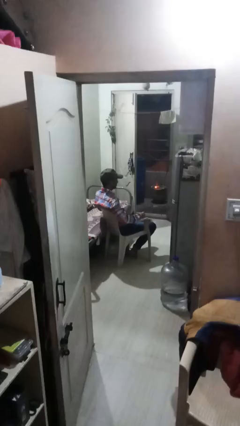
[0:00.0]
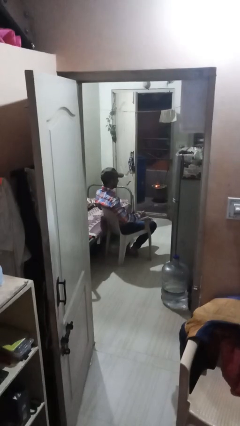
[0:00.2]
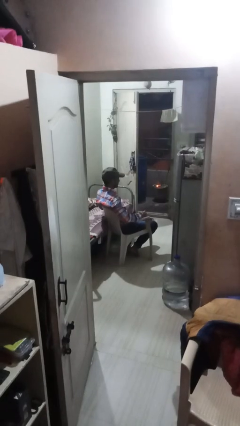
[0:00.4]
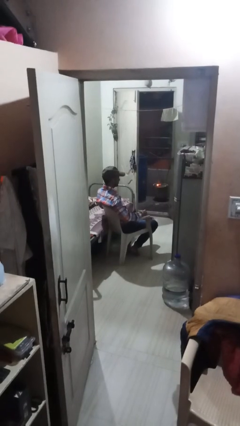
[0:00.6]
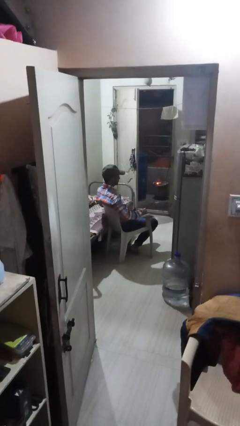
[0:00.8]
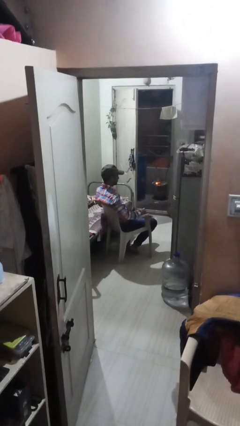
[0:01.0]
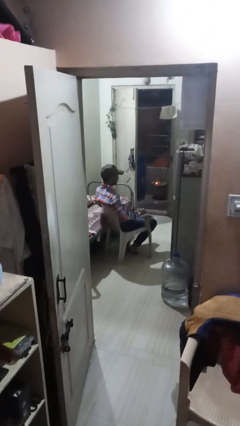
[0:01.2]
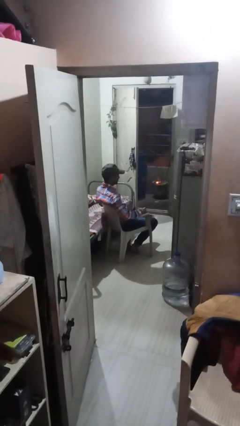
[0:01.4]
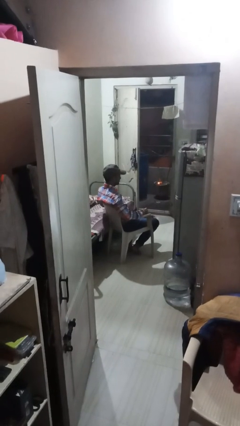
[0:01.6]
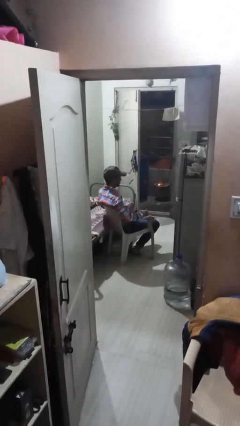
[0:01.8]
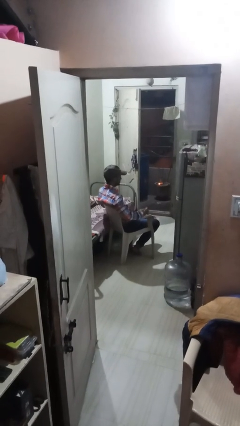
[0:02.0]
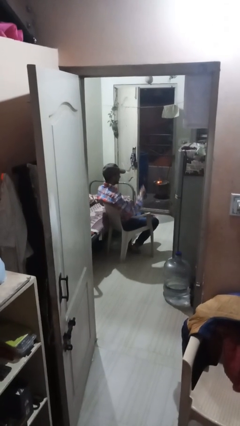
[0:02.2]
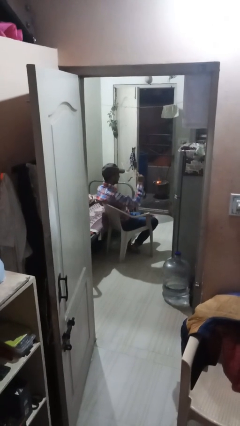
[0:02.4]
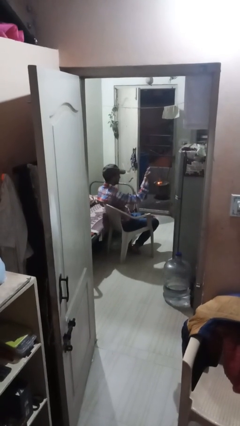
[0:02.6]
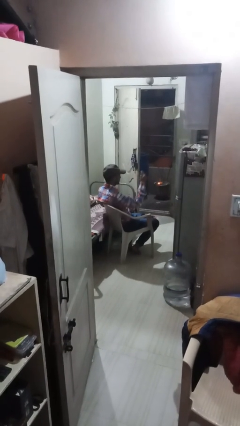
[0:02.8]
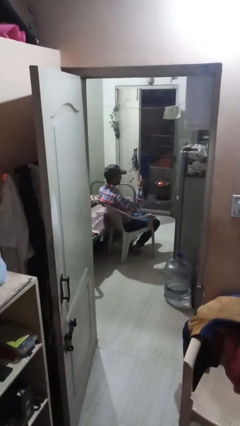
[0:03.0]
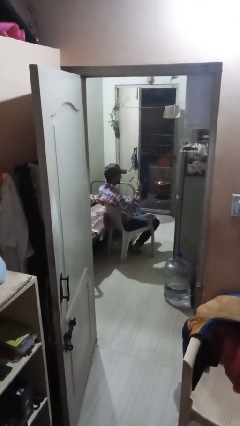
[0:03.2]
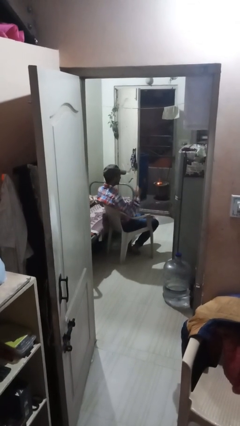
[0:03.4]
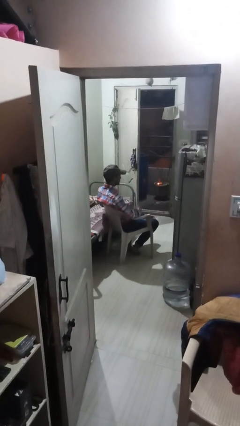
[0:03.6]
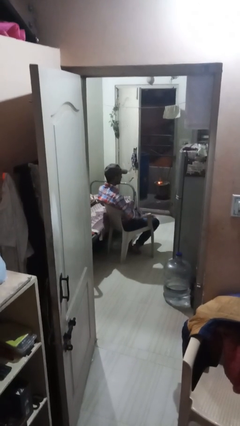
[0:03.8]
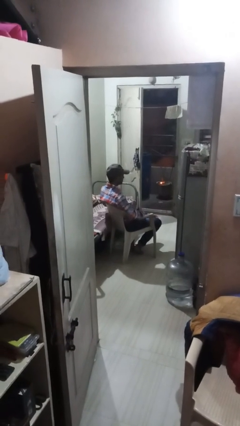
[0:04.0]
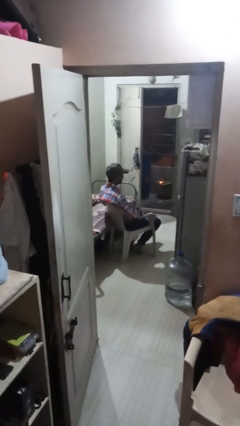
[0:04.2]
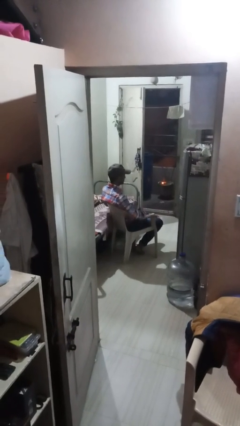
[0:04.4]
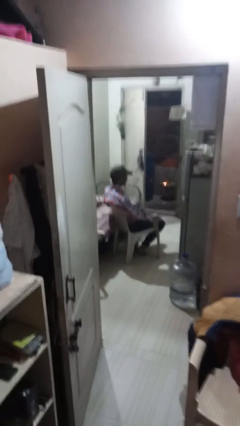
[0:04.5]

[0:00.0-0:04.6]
person snaps fingers

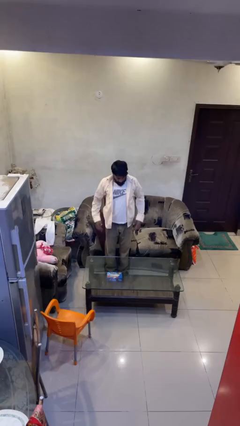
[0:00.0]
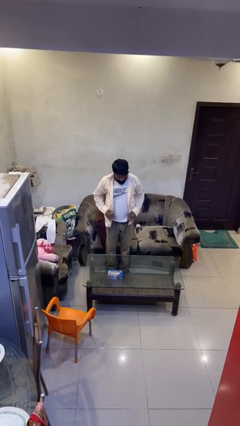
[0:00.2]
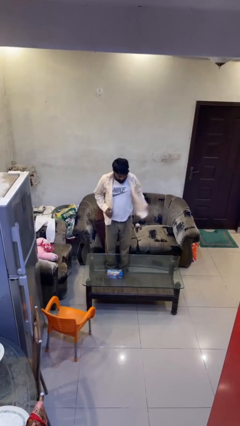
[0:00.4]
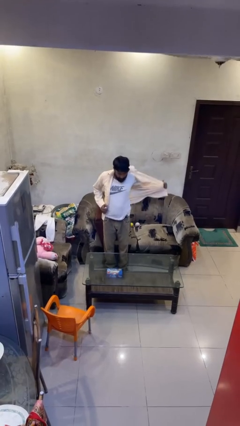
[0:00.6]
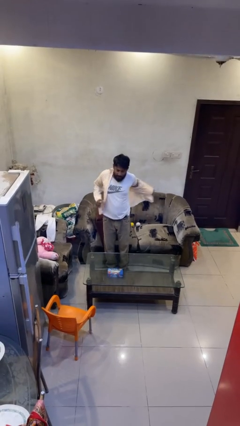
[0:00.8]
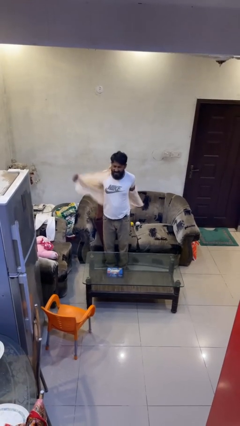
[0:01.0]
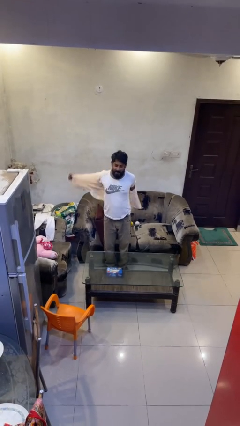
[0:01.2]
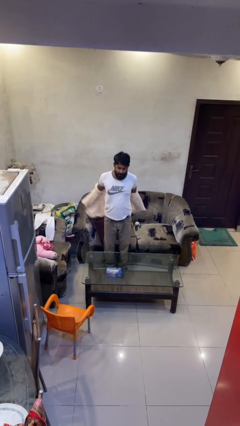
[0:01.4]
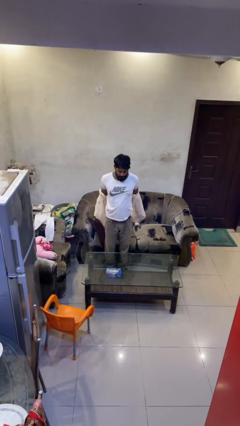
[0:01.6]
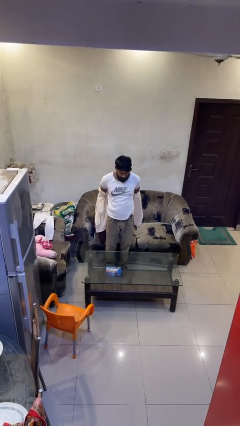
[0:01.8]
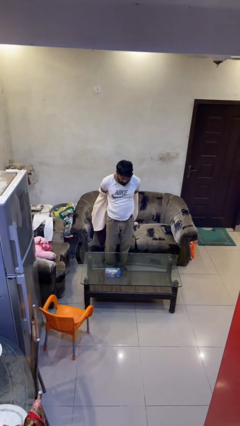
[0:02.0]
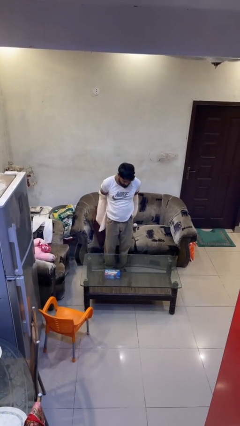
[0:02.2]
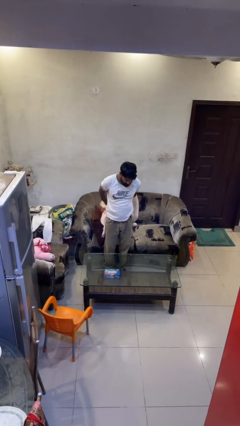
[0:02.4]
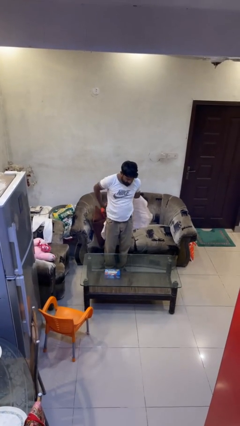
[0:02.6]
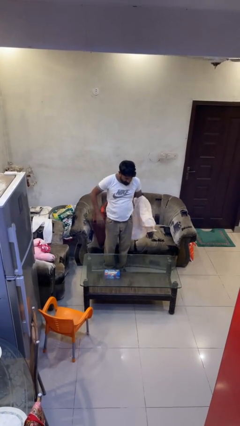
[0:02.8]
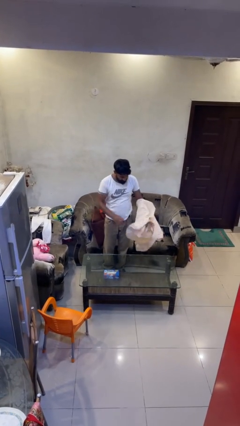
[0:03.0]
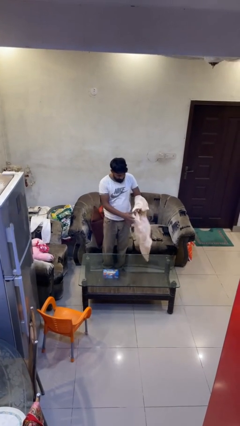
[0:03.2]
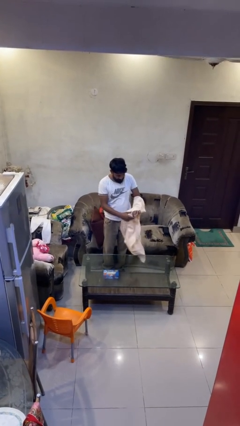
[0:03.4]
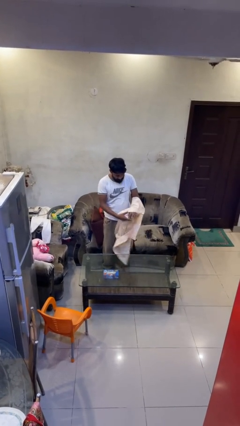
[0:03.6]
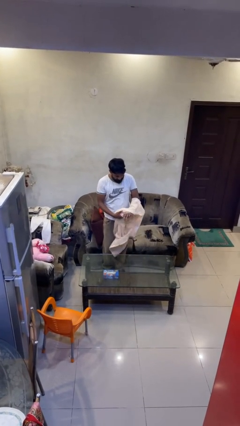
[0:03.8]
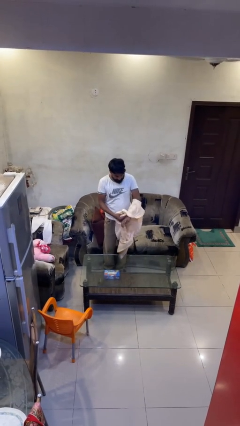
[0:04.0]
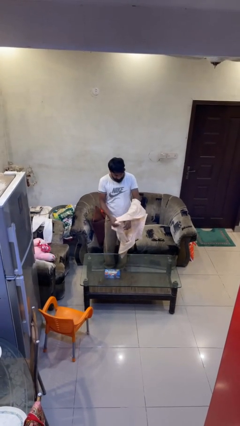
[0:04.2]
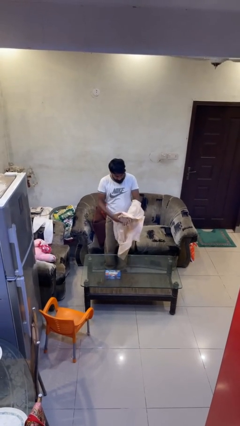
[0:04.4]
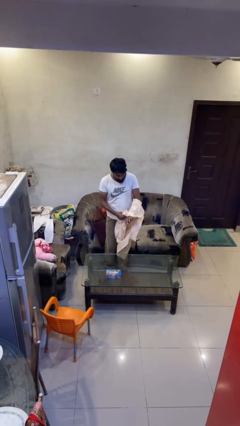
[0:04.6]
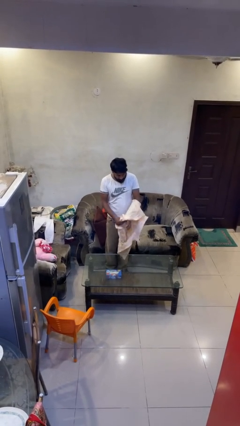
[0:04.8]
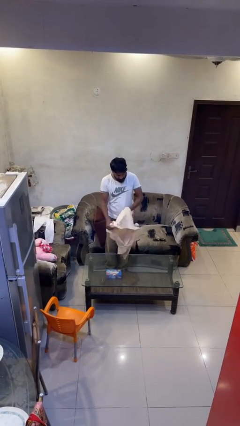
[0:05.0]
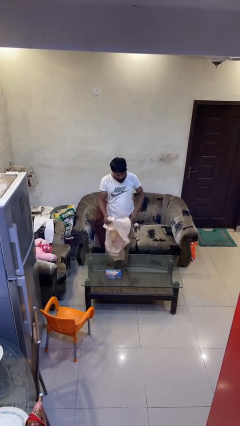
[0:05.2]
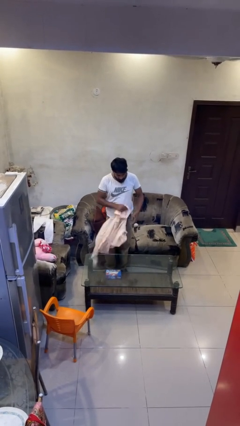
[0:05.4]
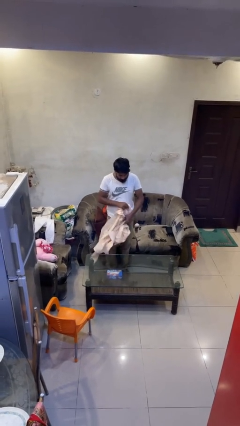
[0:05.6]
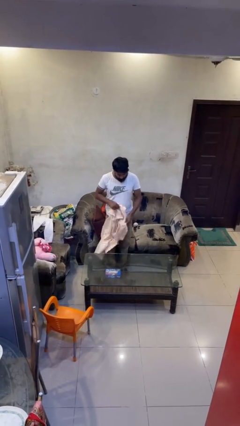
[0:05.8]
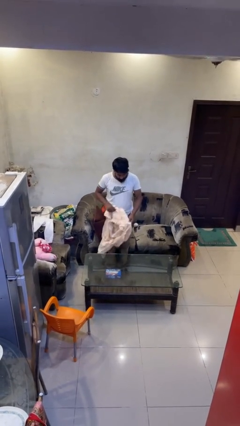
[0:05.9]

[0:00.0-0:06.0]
person takes off shirt

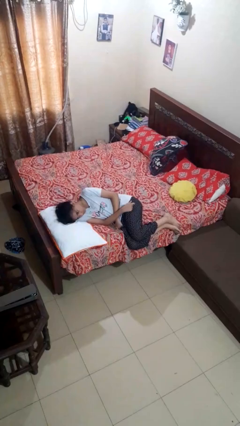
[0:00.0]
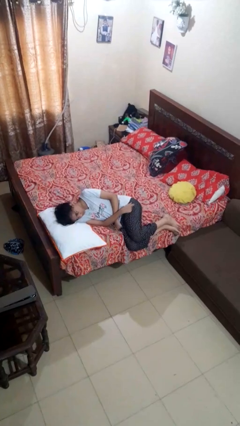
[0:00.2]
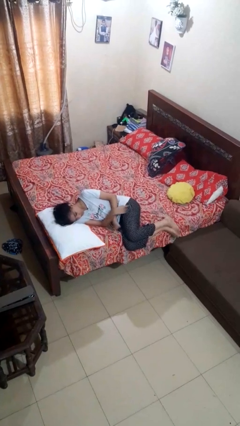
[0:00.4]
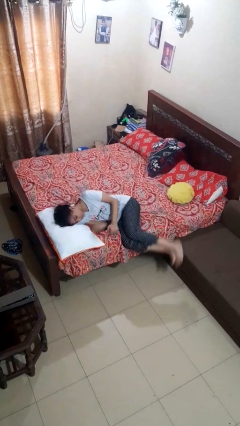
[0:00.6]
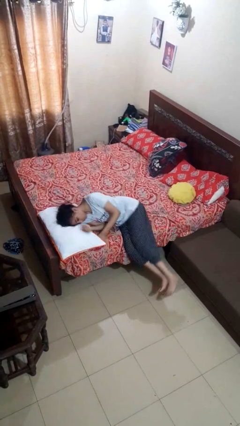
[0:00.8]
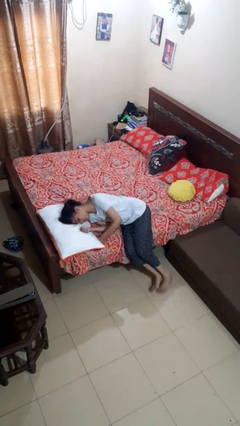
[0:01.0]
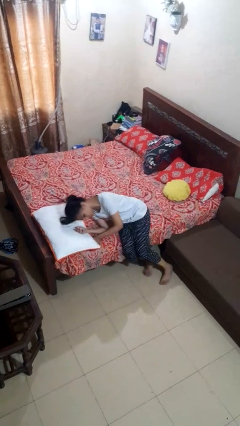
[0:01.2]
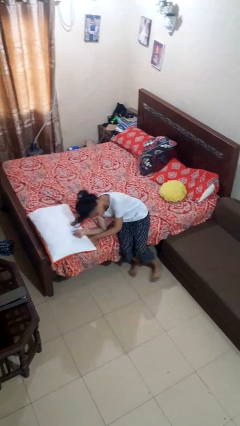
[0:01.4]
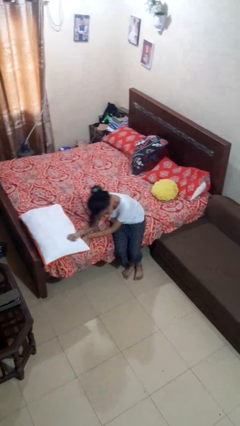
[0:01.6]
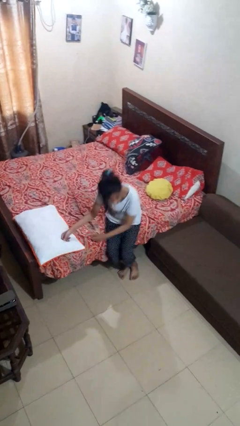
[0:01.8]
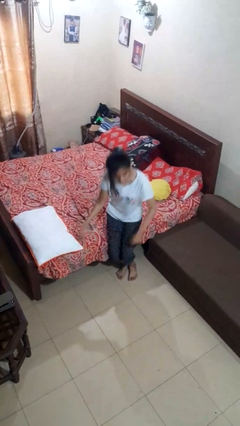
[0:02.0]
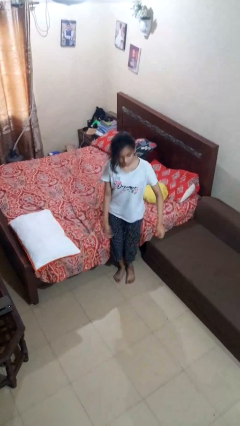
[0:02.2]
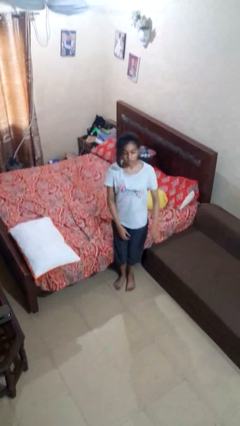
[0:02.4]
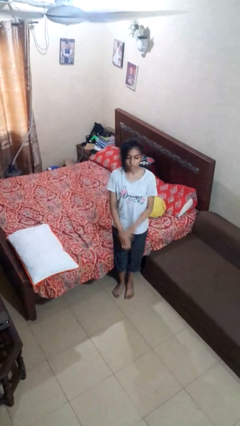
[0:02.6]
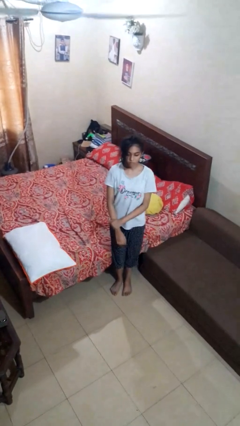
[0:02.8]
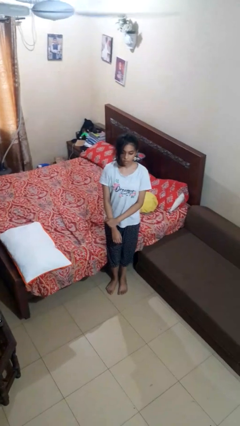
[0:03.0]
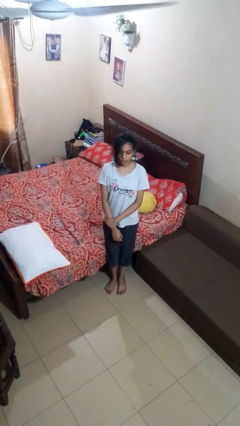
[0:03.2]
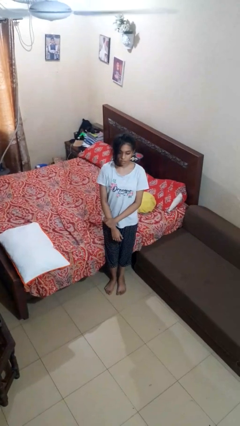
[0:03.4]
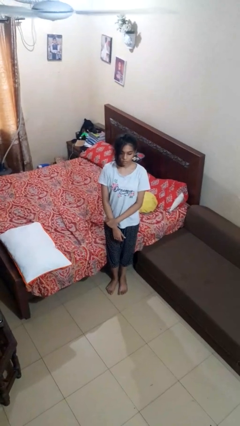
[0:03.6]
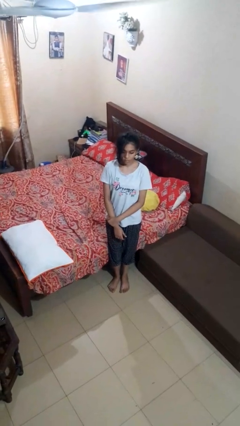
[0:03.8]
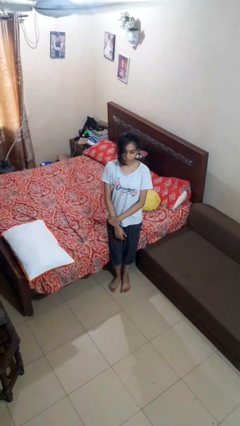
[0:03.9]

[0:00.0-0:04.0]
person stands up

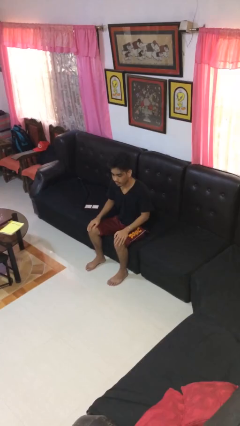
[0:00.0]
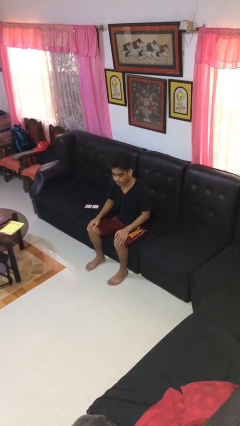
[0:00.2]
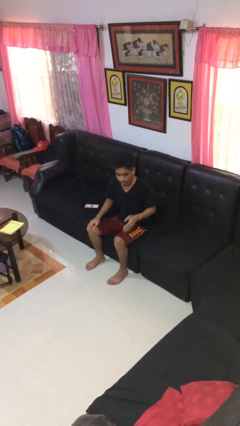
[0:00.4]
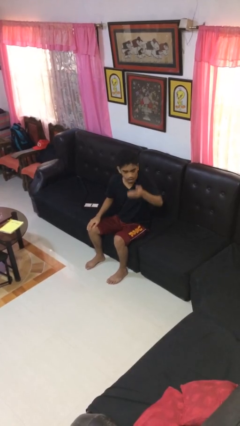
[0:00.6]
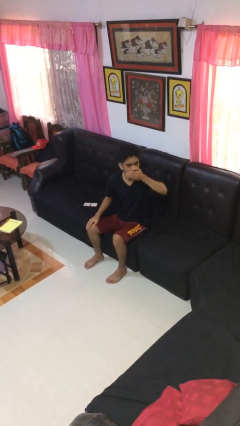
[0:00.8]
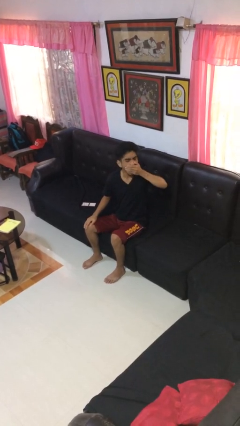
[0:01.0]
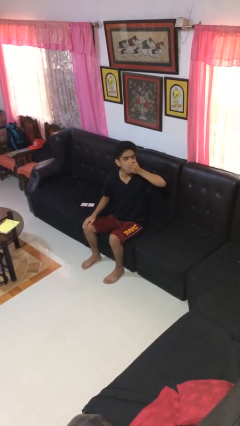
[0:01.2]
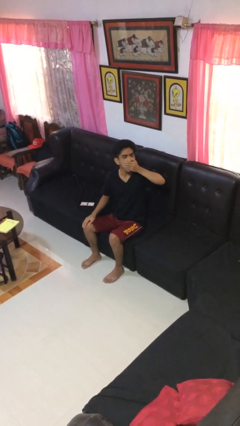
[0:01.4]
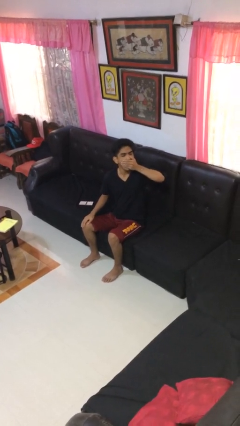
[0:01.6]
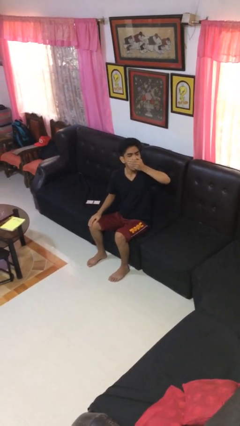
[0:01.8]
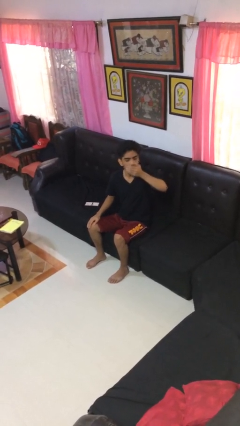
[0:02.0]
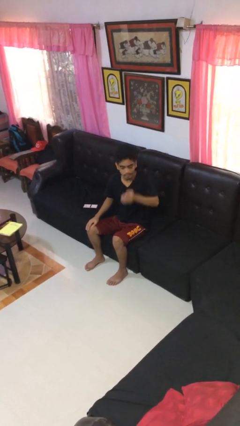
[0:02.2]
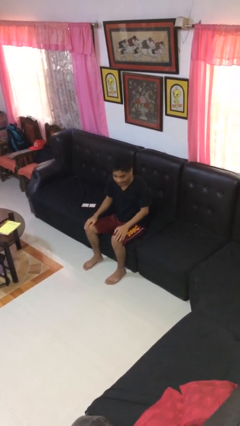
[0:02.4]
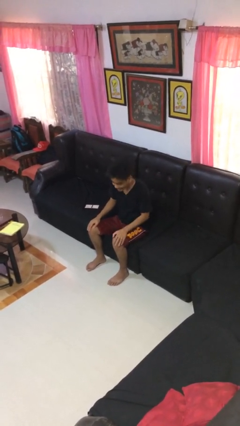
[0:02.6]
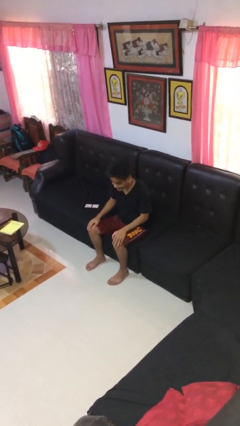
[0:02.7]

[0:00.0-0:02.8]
person yawns

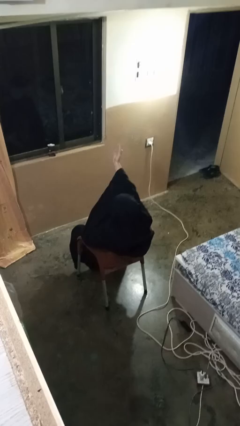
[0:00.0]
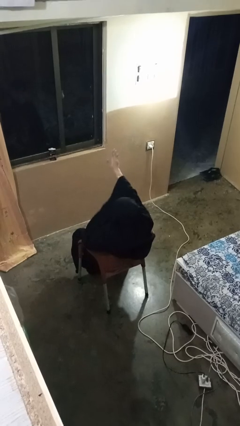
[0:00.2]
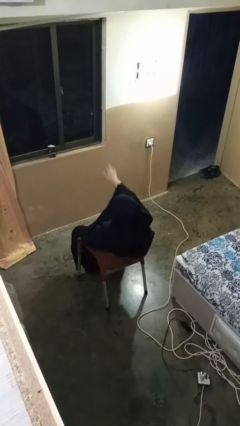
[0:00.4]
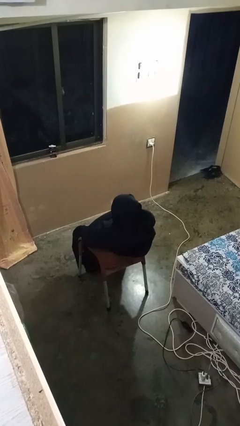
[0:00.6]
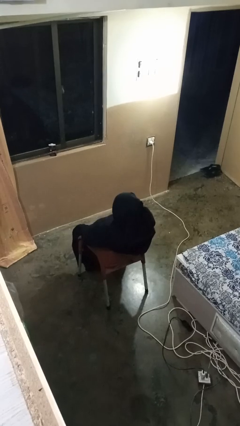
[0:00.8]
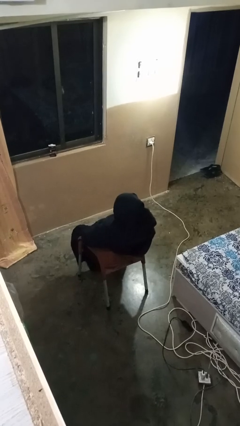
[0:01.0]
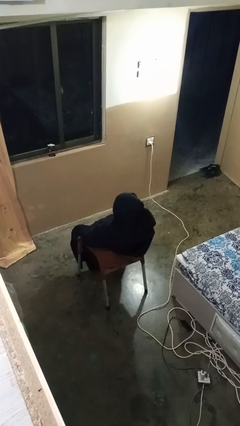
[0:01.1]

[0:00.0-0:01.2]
person gestures swipe down
